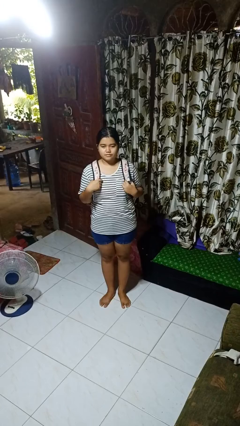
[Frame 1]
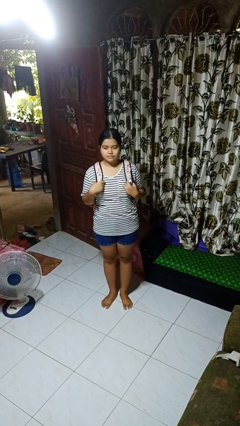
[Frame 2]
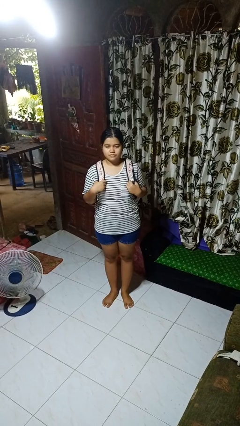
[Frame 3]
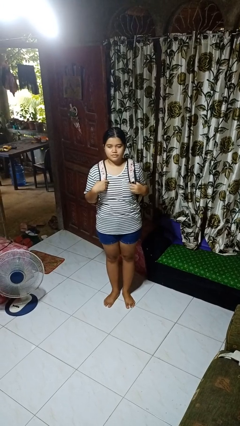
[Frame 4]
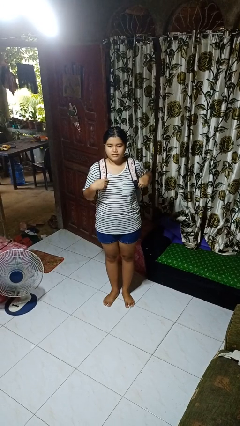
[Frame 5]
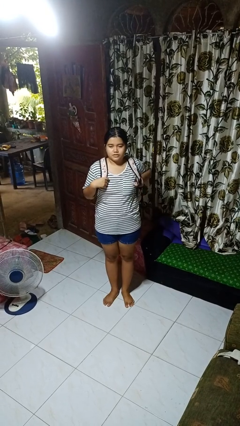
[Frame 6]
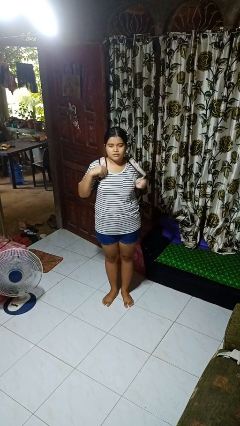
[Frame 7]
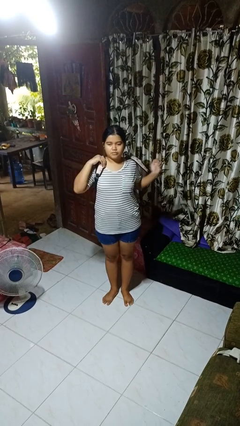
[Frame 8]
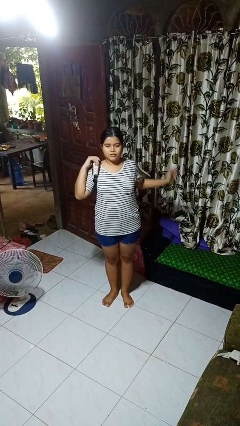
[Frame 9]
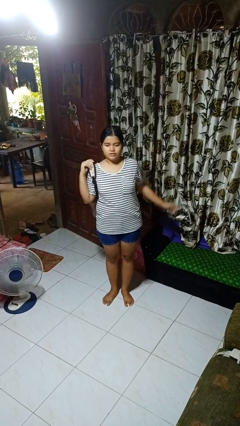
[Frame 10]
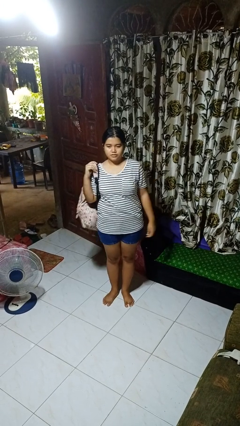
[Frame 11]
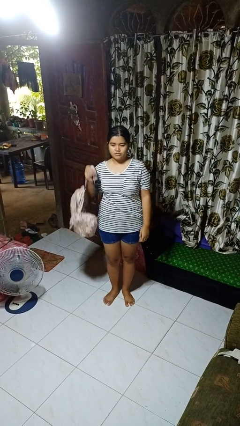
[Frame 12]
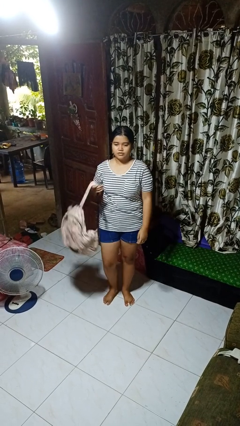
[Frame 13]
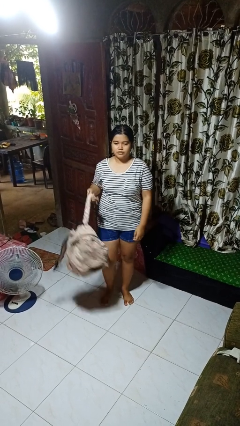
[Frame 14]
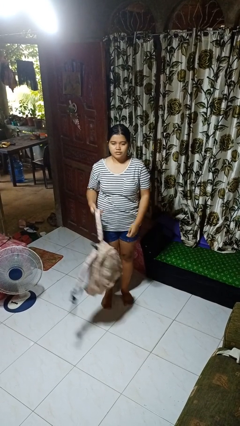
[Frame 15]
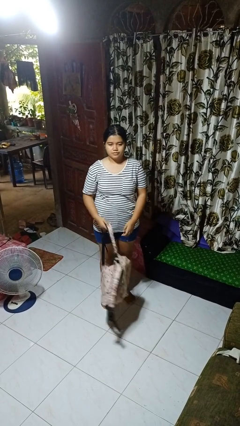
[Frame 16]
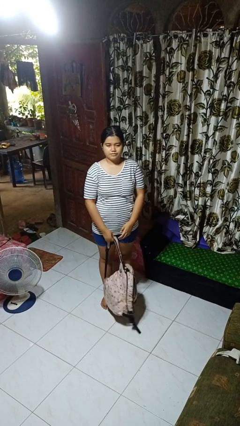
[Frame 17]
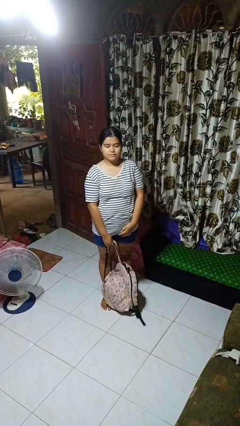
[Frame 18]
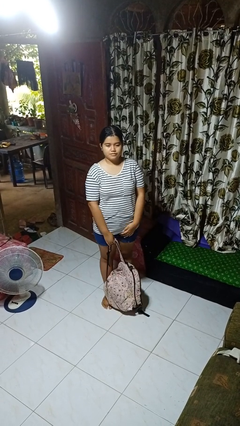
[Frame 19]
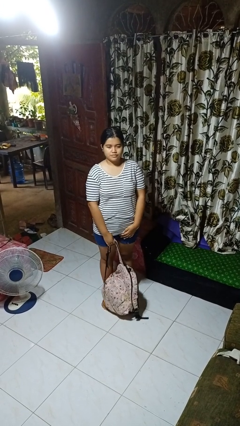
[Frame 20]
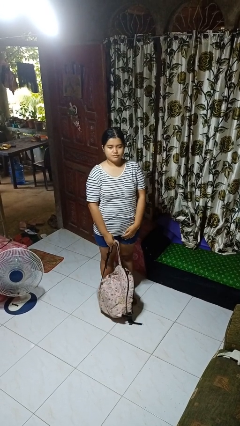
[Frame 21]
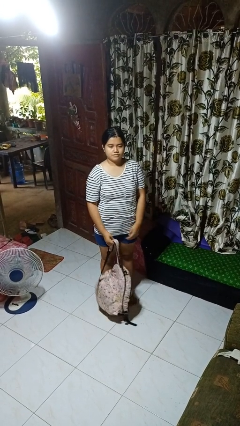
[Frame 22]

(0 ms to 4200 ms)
person takes off backpack

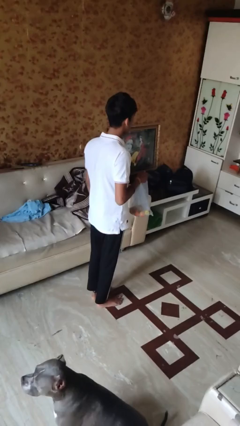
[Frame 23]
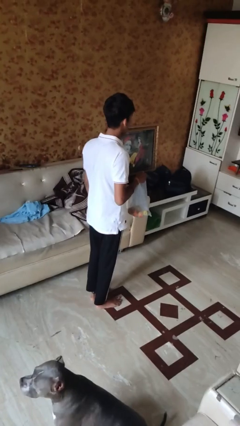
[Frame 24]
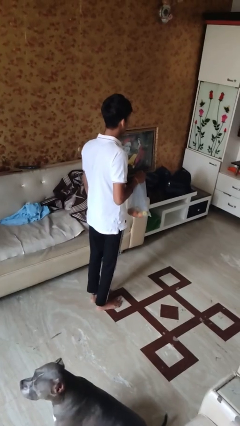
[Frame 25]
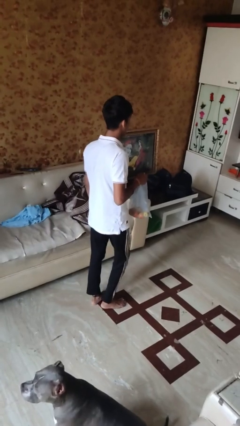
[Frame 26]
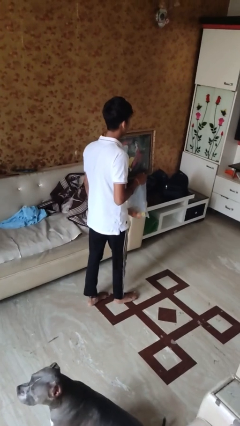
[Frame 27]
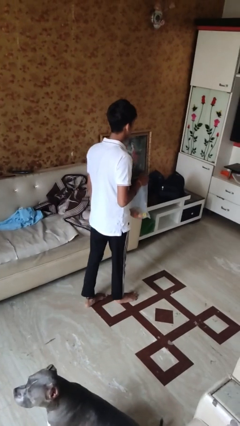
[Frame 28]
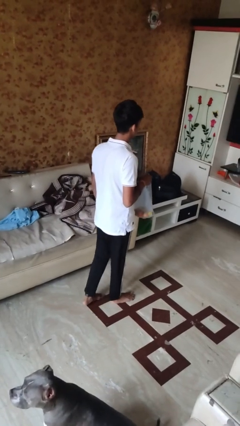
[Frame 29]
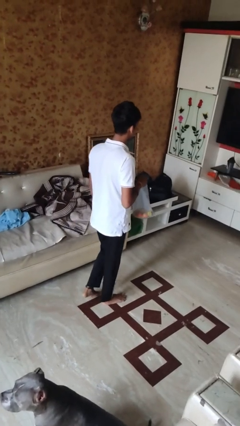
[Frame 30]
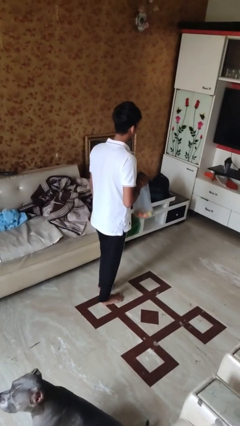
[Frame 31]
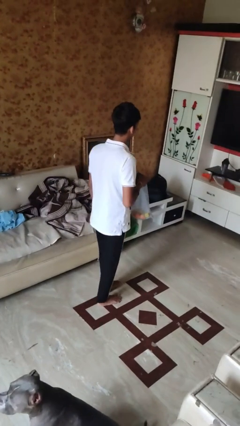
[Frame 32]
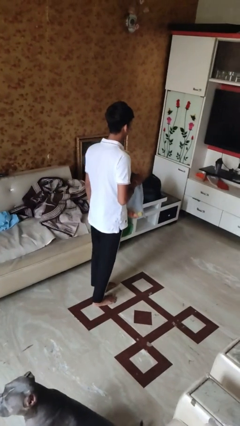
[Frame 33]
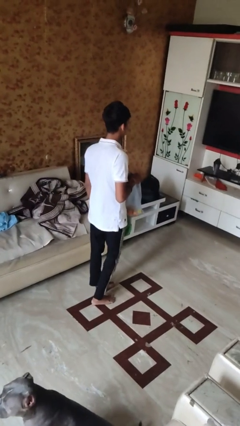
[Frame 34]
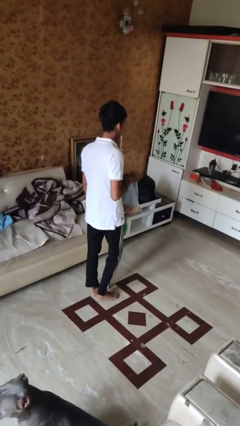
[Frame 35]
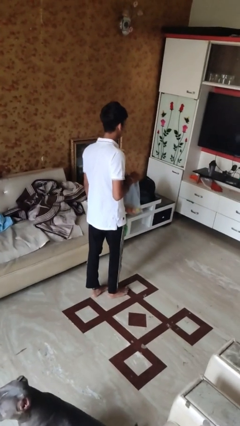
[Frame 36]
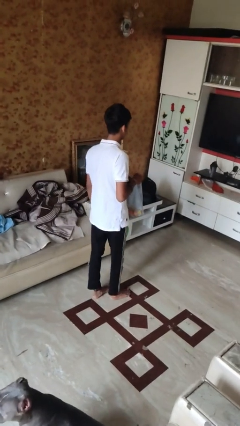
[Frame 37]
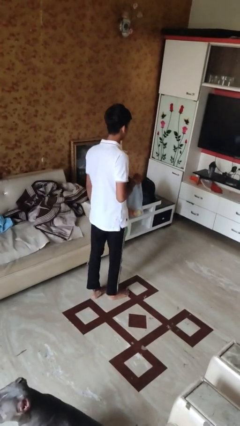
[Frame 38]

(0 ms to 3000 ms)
person carries groceries

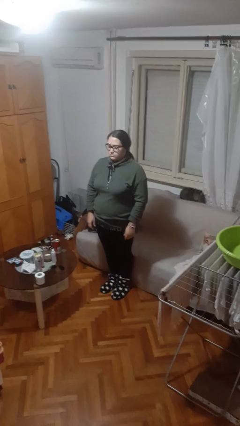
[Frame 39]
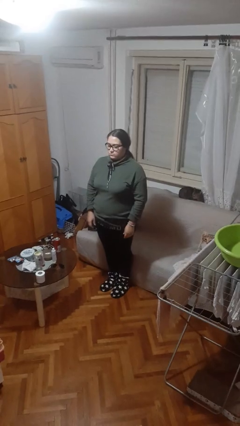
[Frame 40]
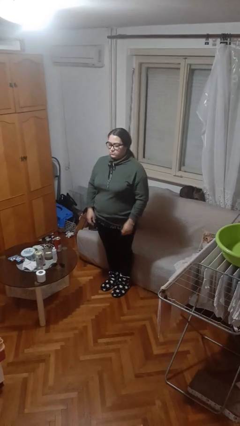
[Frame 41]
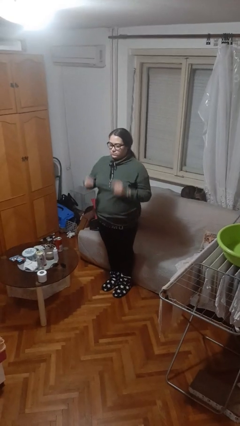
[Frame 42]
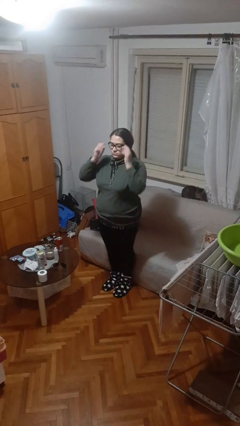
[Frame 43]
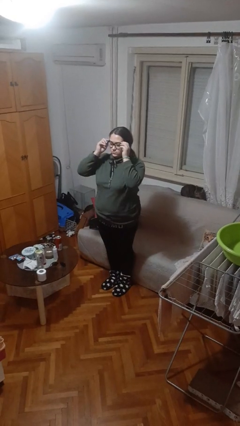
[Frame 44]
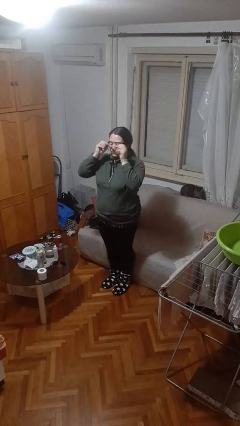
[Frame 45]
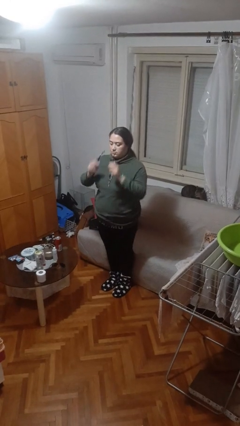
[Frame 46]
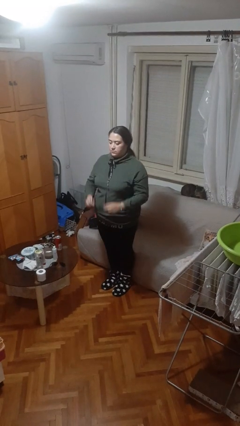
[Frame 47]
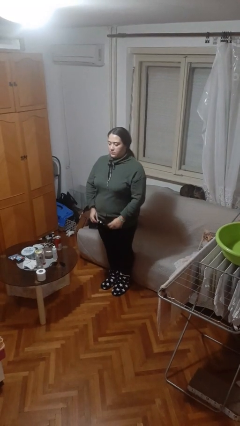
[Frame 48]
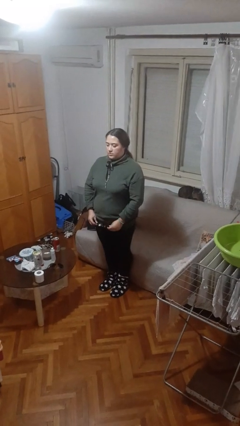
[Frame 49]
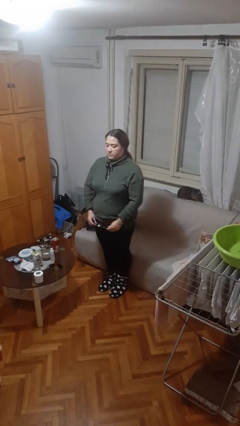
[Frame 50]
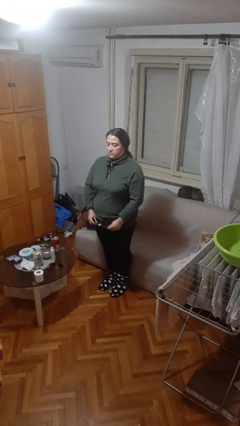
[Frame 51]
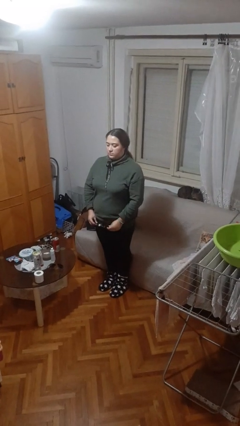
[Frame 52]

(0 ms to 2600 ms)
person takes off glasses

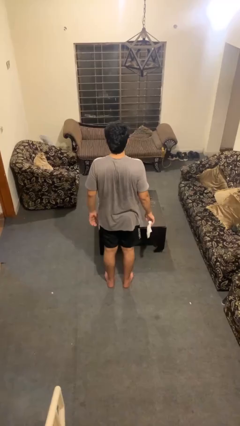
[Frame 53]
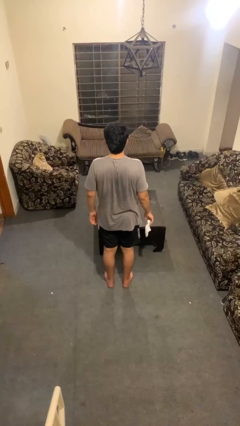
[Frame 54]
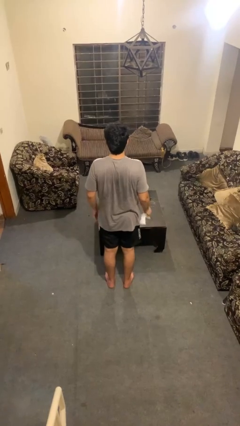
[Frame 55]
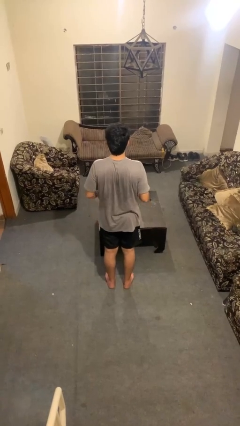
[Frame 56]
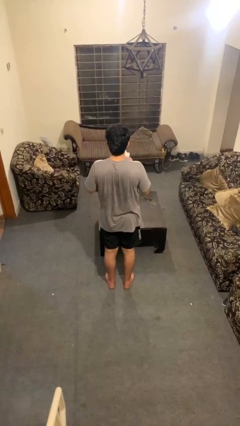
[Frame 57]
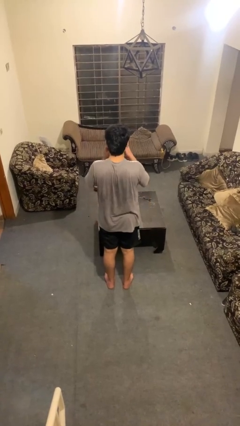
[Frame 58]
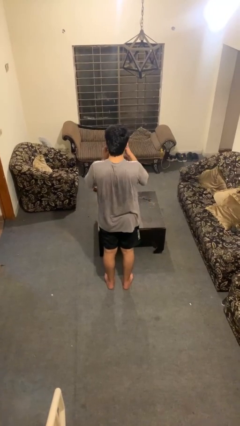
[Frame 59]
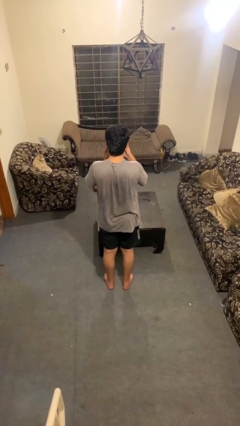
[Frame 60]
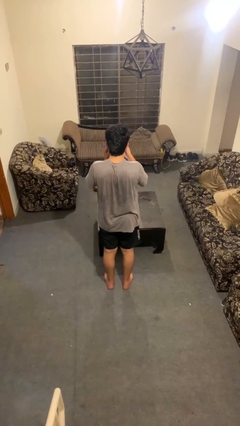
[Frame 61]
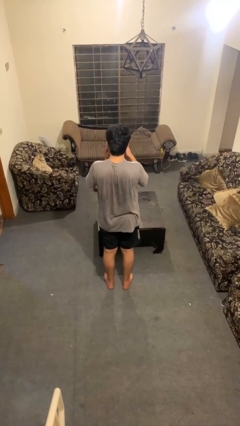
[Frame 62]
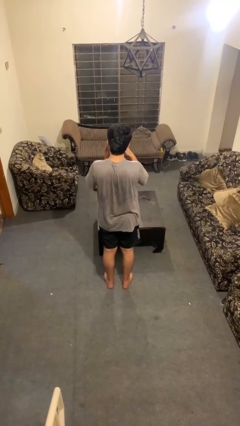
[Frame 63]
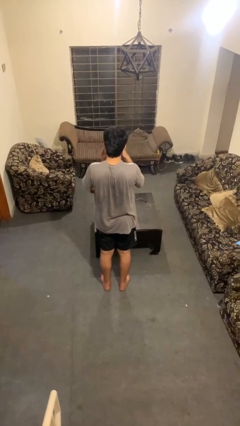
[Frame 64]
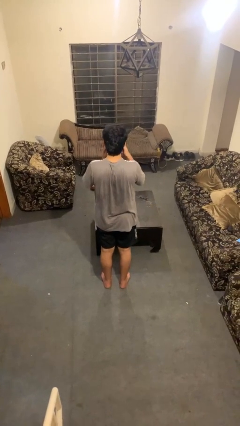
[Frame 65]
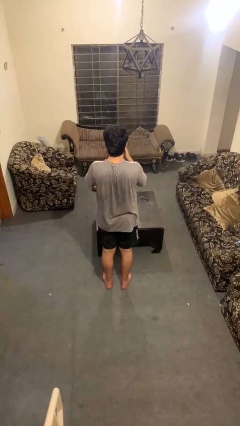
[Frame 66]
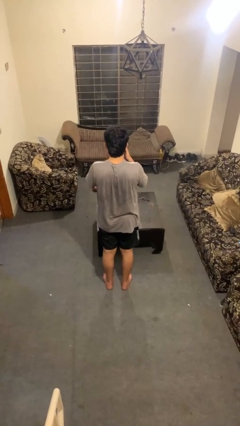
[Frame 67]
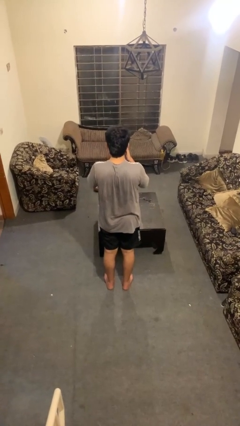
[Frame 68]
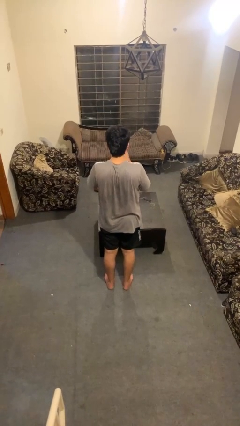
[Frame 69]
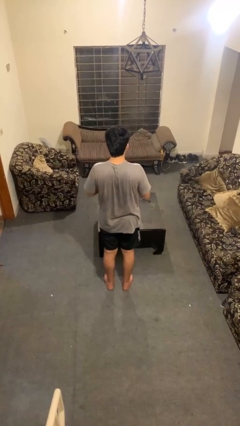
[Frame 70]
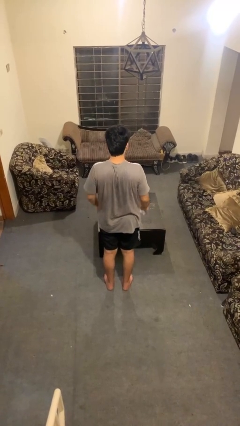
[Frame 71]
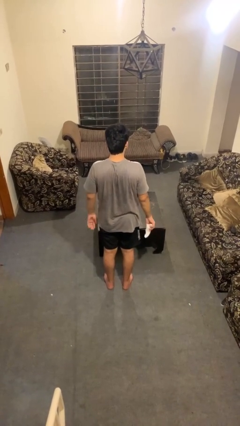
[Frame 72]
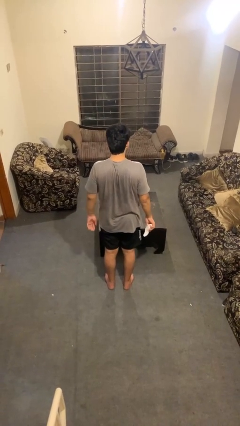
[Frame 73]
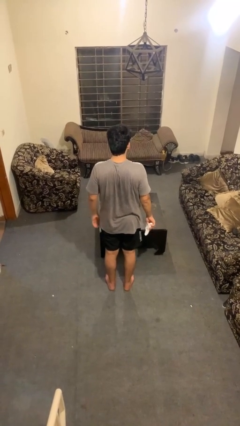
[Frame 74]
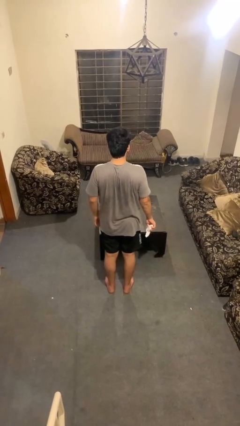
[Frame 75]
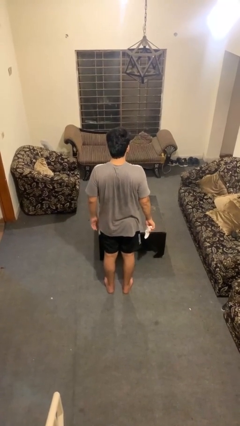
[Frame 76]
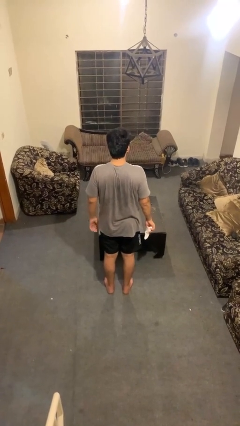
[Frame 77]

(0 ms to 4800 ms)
person blows nose

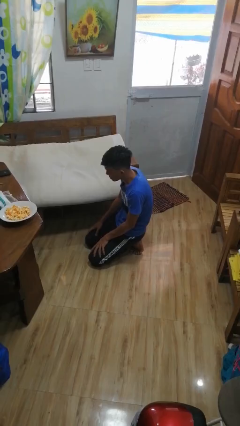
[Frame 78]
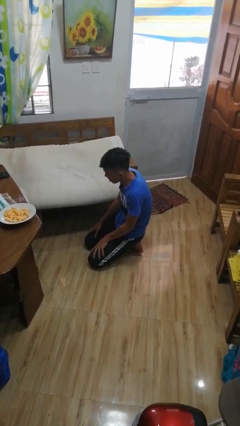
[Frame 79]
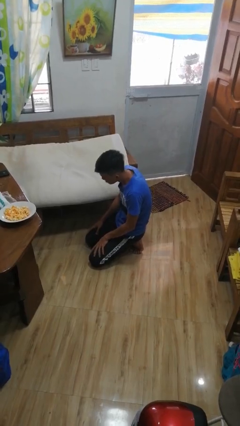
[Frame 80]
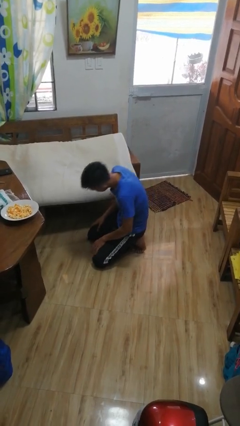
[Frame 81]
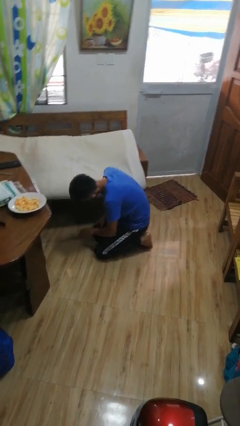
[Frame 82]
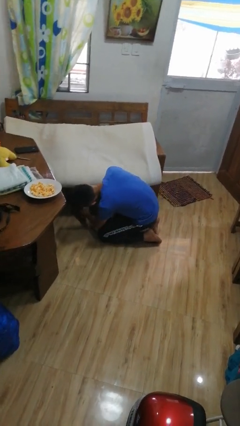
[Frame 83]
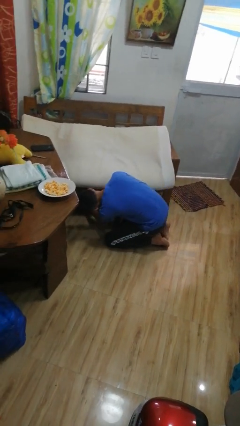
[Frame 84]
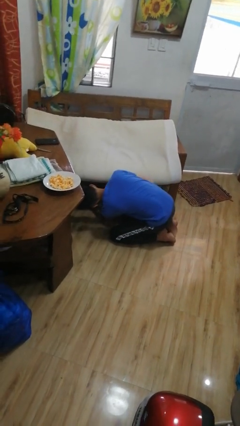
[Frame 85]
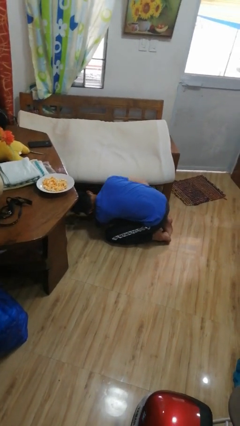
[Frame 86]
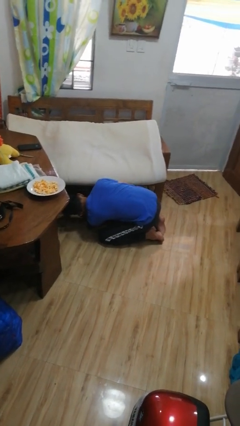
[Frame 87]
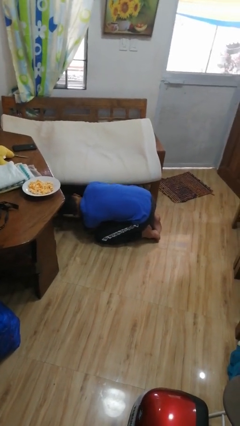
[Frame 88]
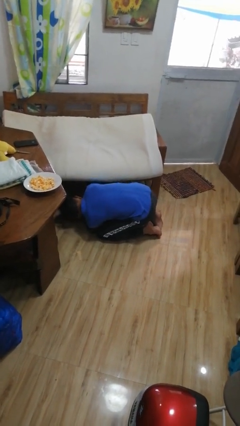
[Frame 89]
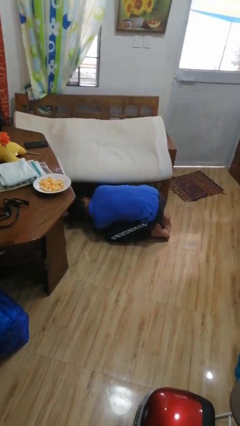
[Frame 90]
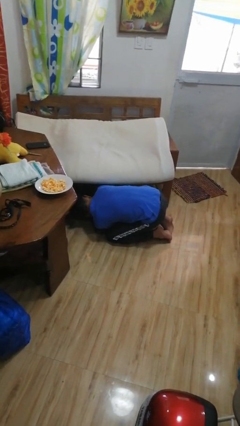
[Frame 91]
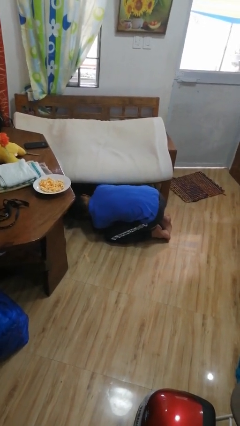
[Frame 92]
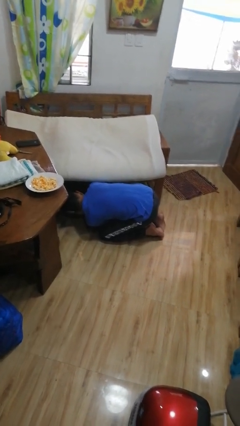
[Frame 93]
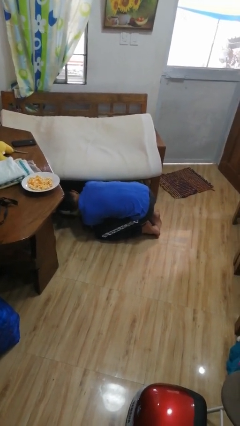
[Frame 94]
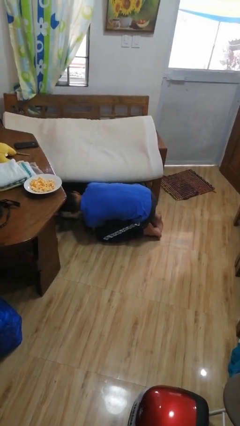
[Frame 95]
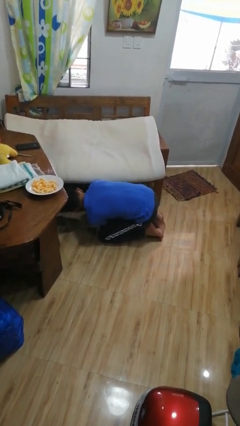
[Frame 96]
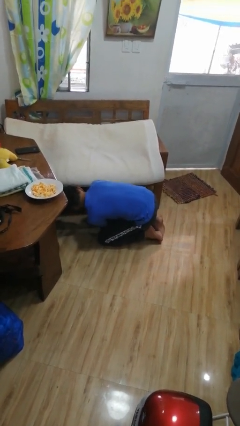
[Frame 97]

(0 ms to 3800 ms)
person searches under couch
